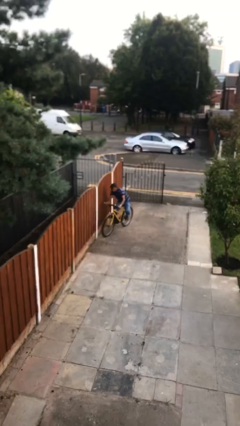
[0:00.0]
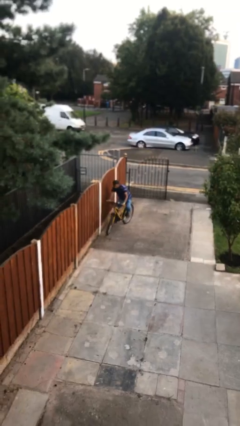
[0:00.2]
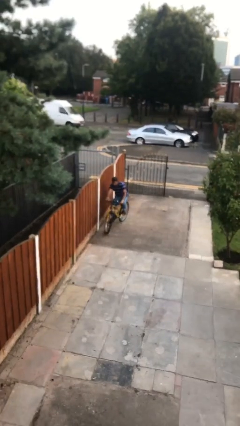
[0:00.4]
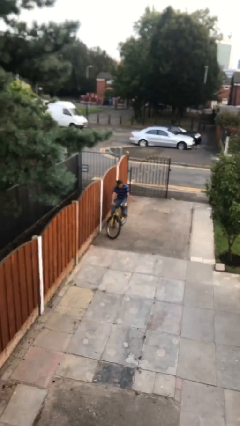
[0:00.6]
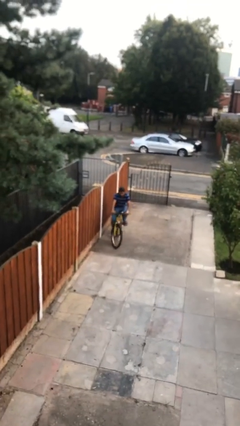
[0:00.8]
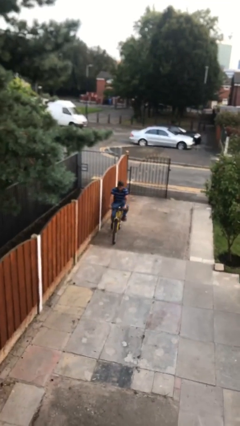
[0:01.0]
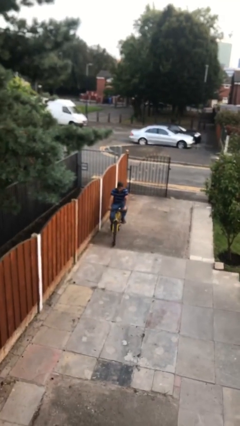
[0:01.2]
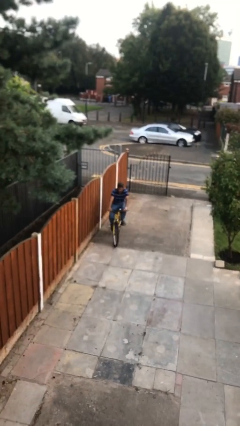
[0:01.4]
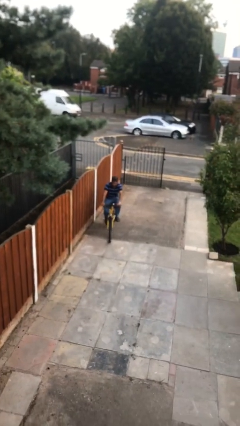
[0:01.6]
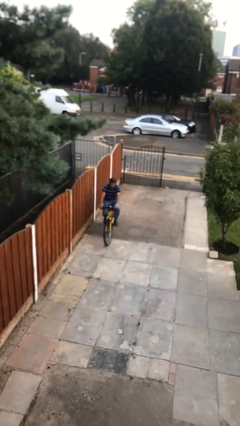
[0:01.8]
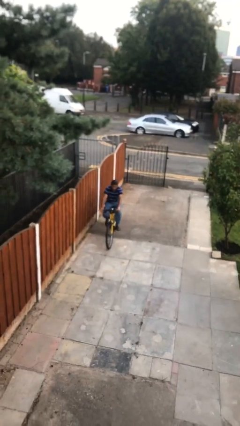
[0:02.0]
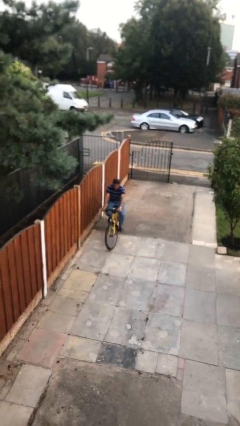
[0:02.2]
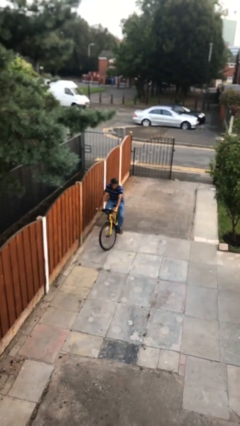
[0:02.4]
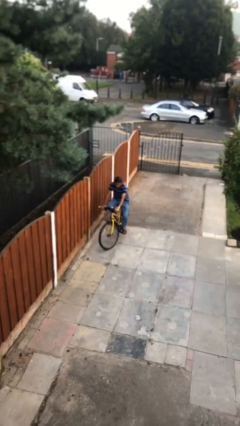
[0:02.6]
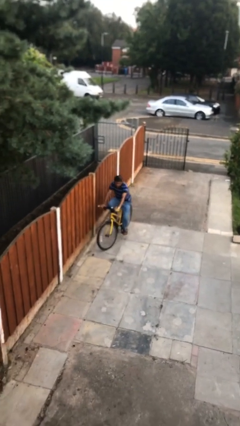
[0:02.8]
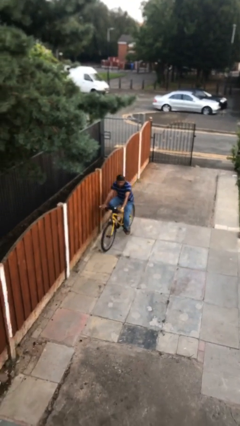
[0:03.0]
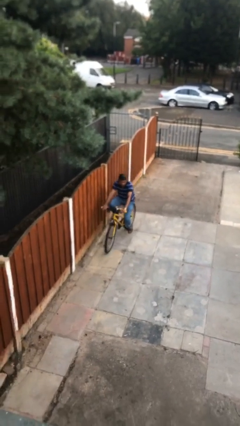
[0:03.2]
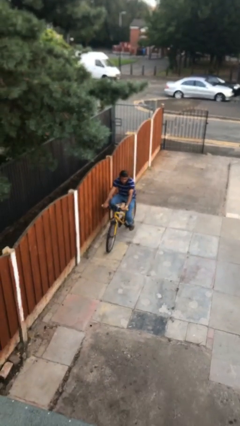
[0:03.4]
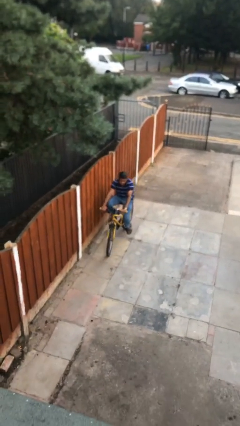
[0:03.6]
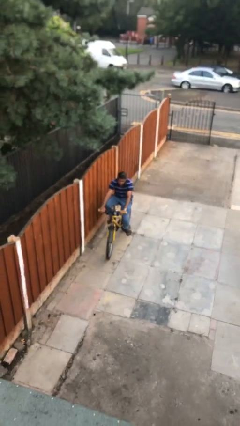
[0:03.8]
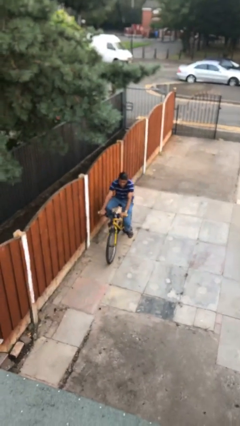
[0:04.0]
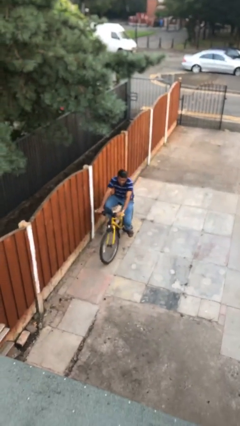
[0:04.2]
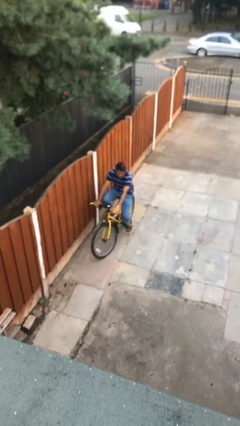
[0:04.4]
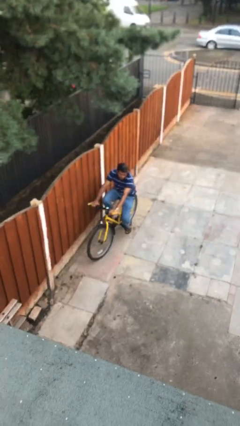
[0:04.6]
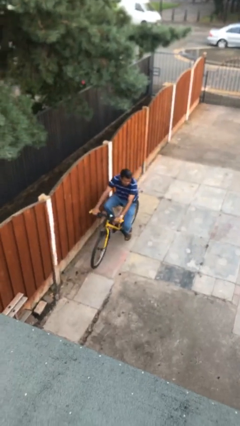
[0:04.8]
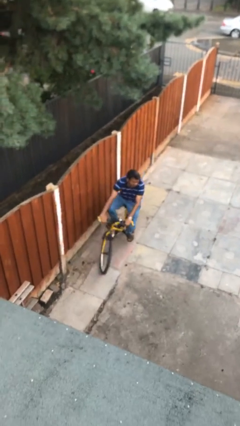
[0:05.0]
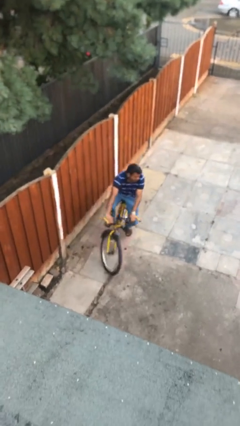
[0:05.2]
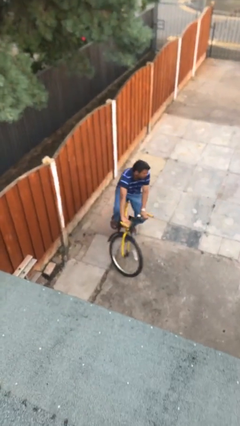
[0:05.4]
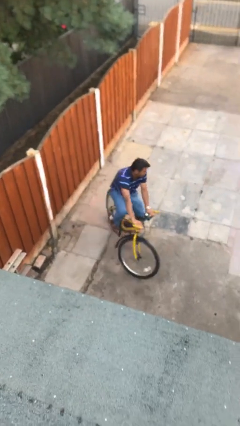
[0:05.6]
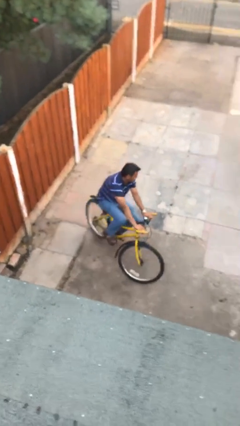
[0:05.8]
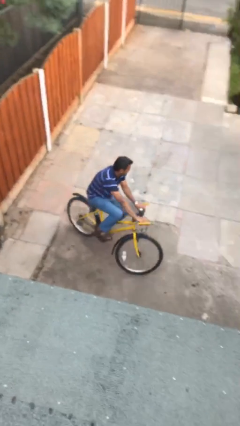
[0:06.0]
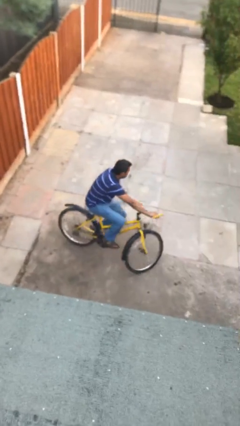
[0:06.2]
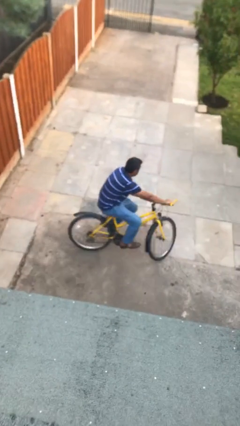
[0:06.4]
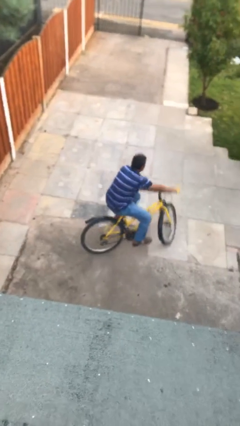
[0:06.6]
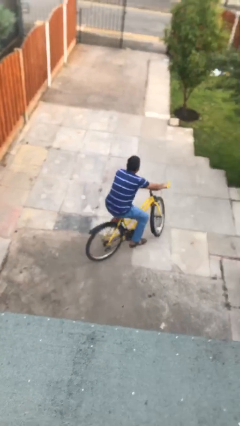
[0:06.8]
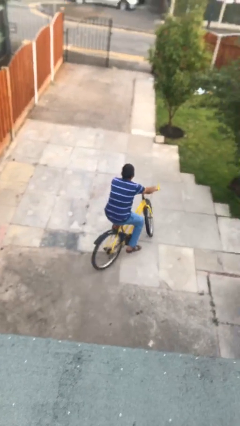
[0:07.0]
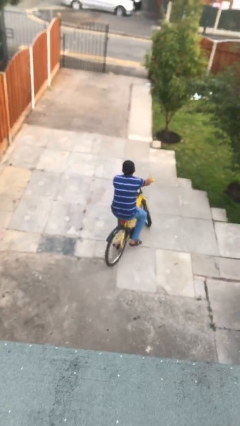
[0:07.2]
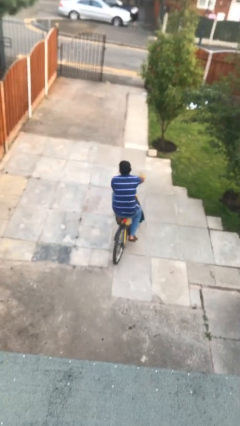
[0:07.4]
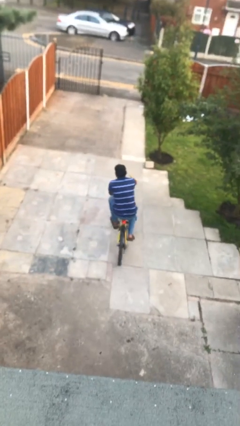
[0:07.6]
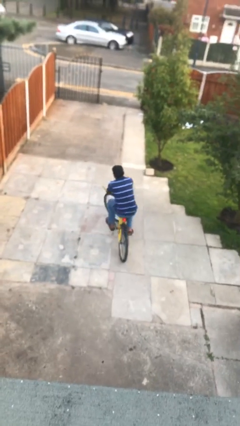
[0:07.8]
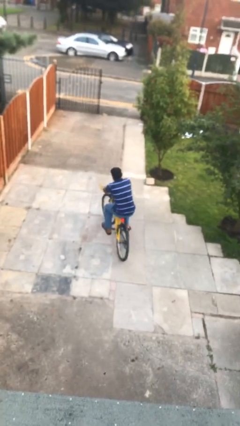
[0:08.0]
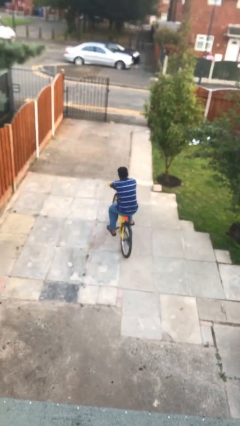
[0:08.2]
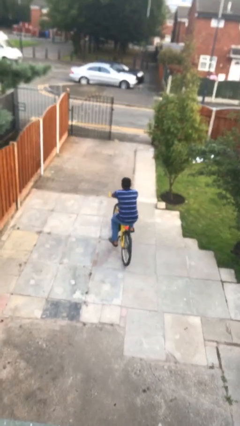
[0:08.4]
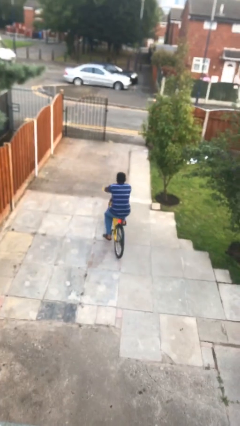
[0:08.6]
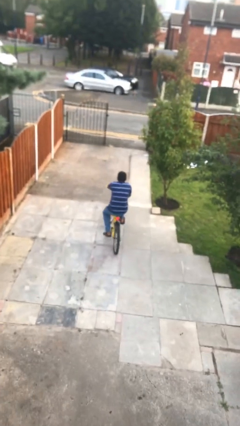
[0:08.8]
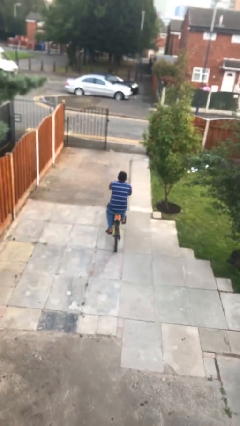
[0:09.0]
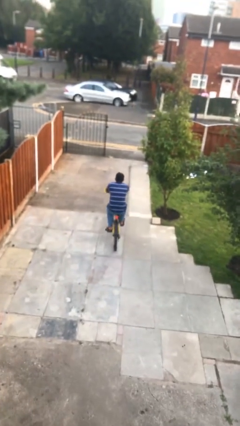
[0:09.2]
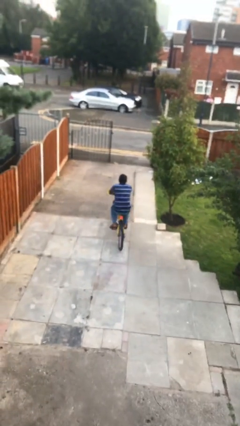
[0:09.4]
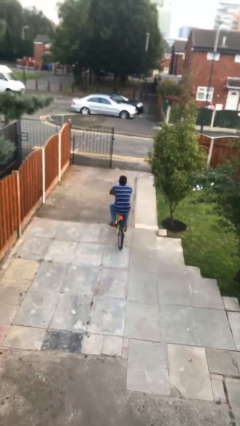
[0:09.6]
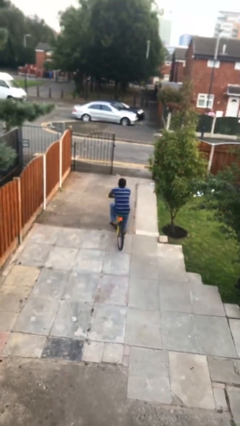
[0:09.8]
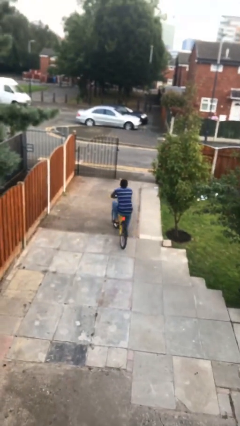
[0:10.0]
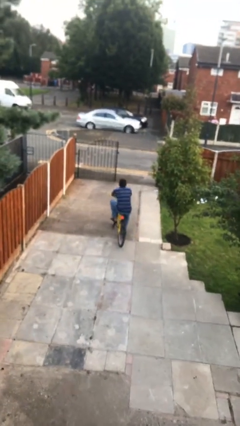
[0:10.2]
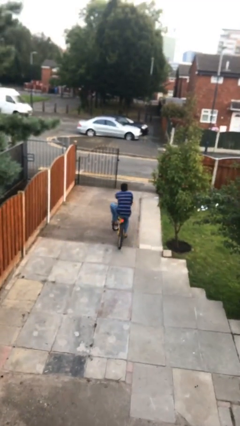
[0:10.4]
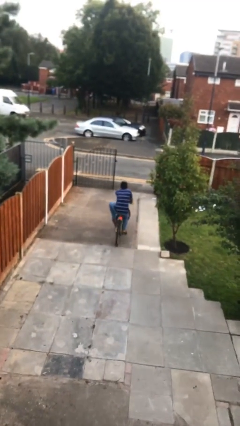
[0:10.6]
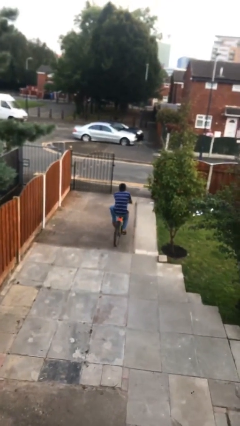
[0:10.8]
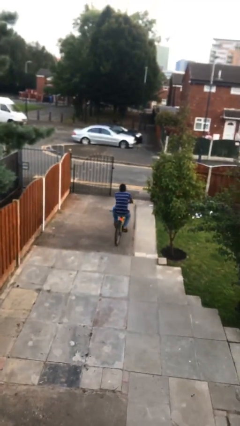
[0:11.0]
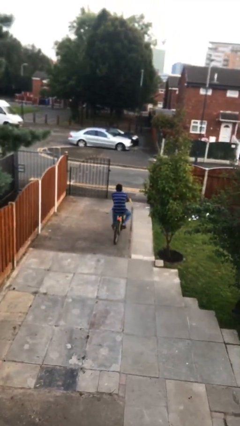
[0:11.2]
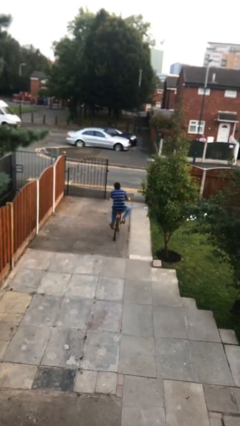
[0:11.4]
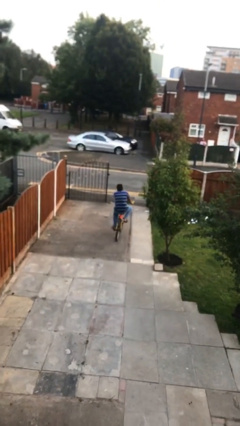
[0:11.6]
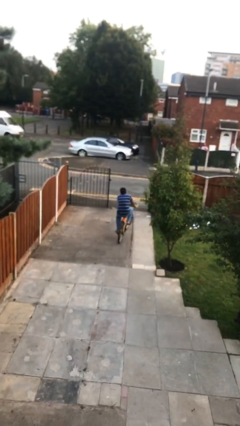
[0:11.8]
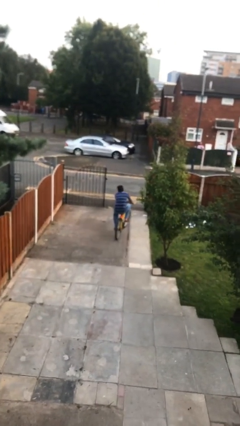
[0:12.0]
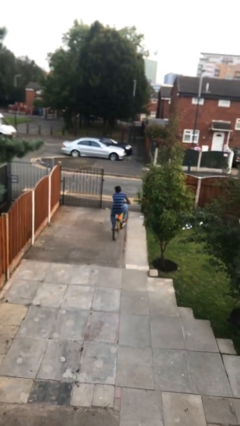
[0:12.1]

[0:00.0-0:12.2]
person rides bicycle

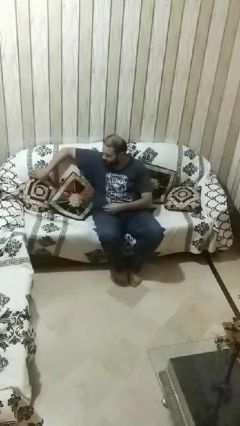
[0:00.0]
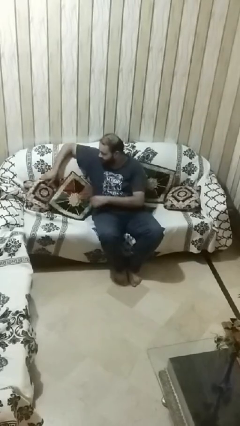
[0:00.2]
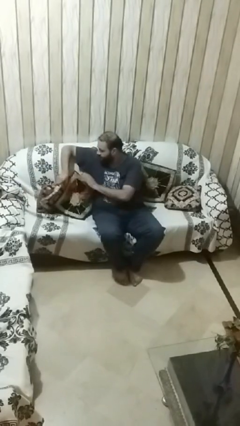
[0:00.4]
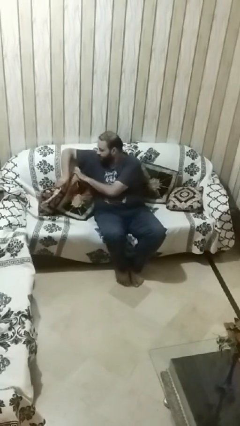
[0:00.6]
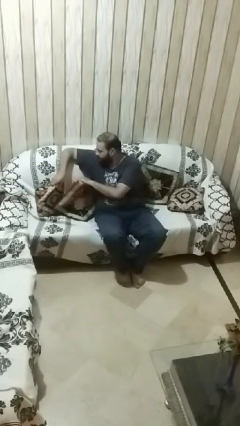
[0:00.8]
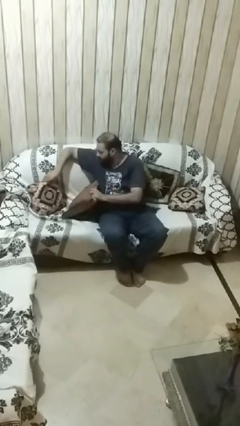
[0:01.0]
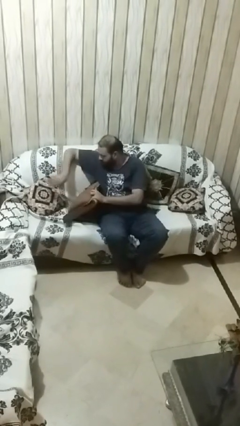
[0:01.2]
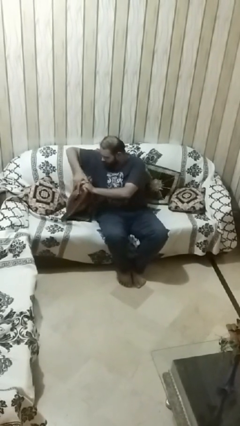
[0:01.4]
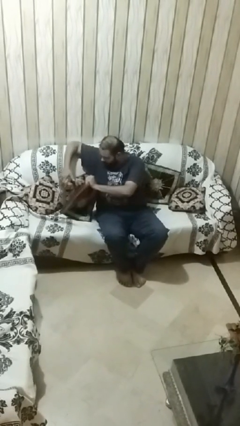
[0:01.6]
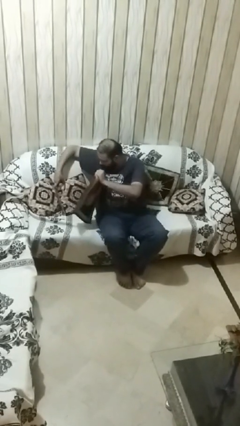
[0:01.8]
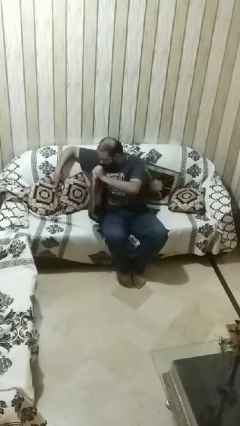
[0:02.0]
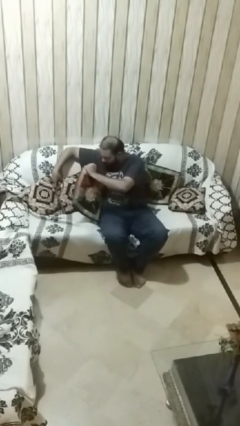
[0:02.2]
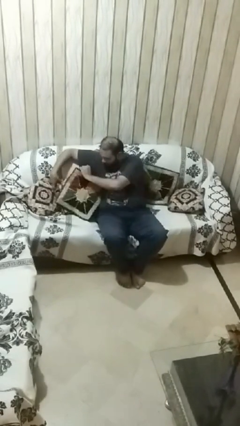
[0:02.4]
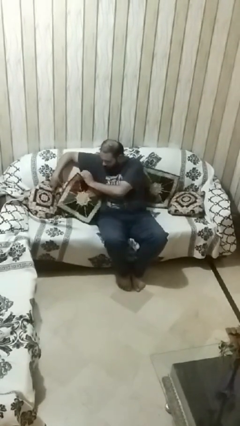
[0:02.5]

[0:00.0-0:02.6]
person searches in couch

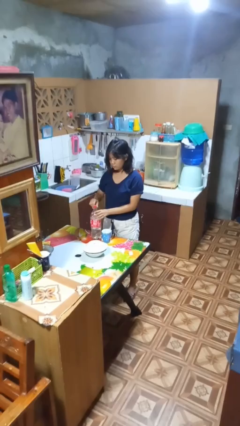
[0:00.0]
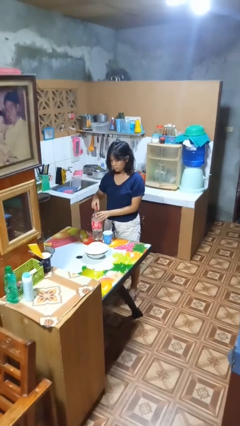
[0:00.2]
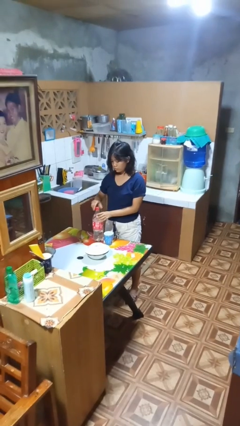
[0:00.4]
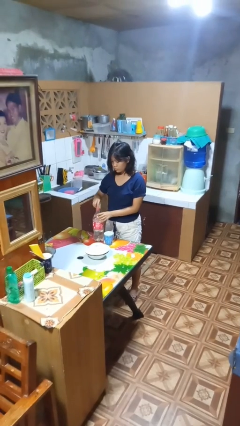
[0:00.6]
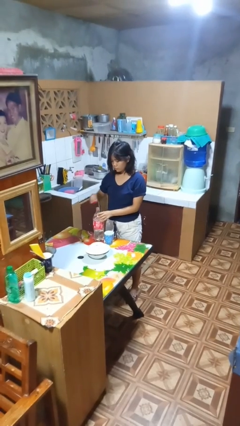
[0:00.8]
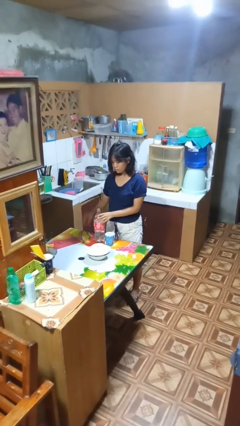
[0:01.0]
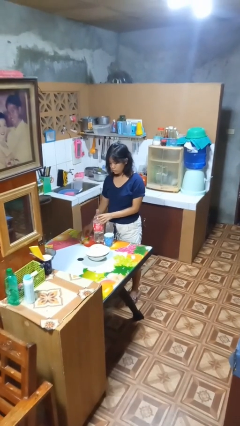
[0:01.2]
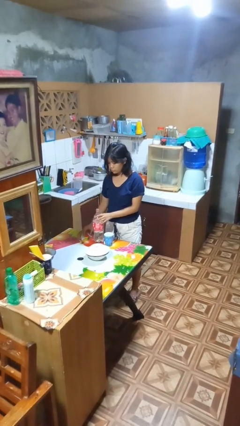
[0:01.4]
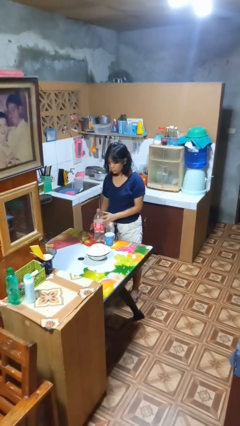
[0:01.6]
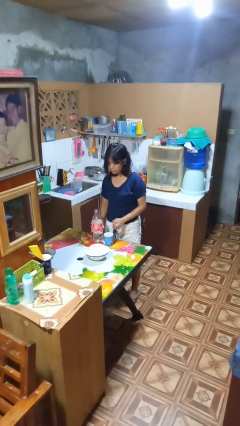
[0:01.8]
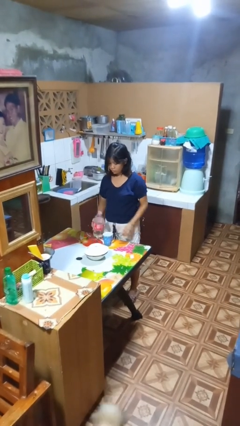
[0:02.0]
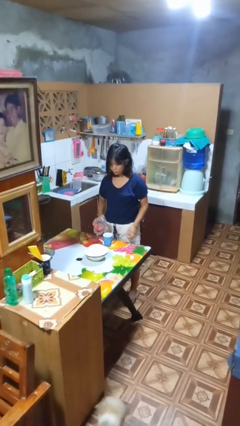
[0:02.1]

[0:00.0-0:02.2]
person unscrews lid from bottle

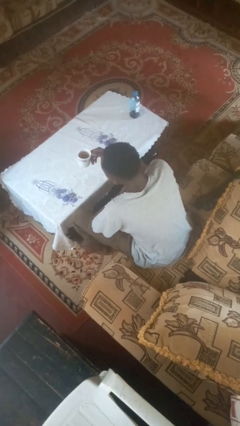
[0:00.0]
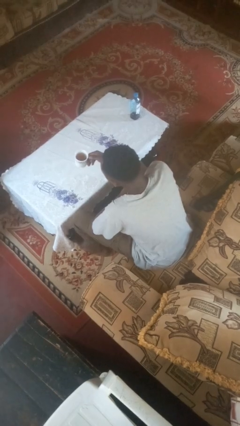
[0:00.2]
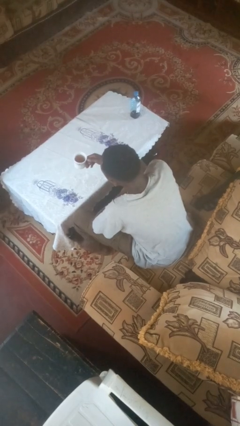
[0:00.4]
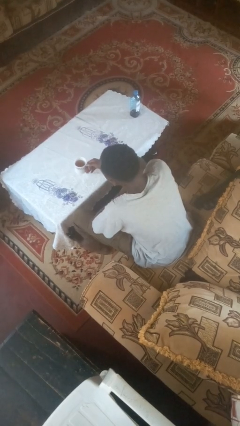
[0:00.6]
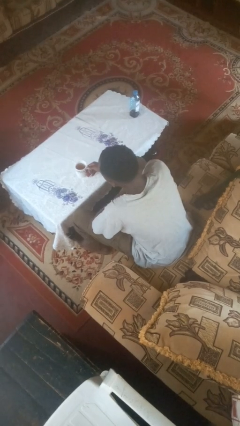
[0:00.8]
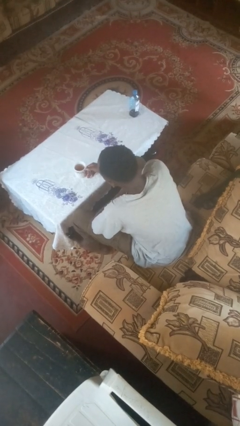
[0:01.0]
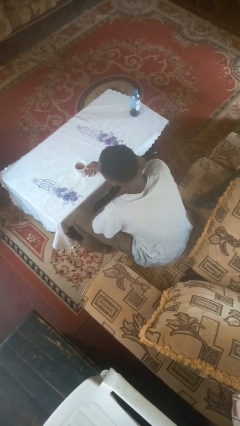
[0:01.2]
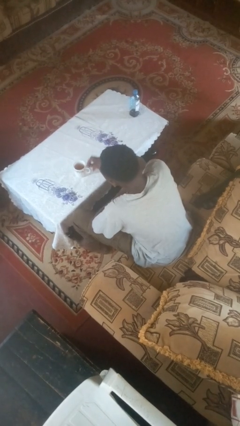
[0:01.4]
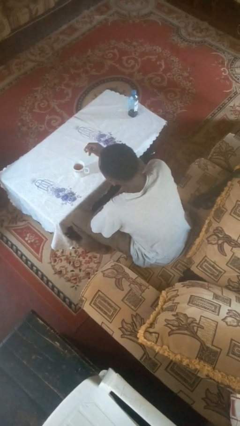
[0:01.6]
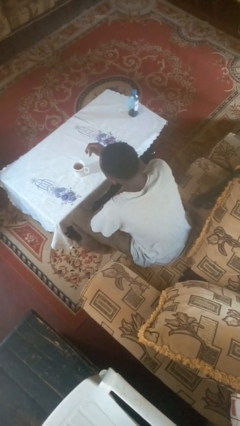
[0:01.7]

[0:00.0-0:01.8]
person puts down object on table
